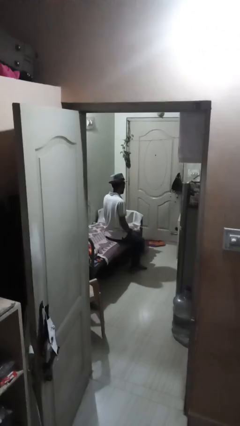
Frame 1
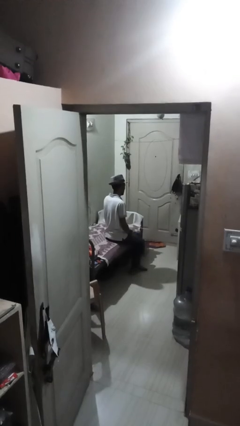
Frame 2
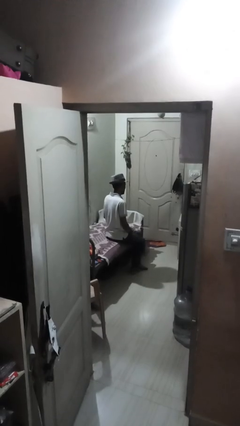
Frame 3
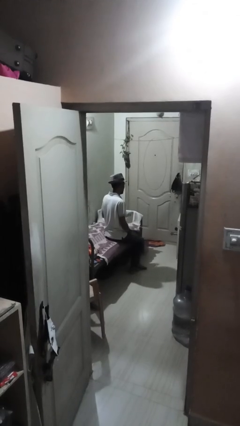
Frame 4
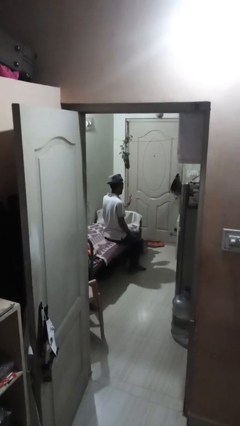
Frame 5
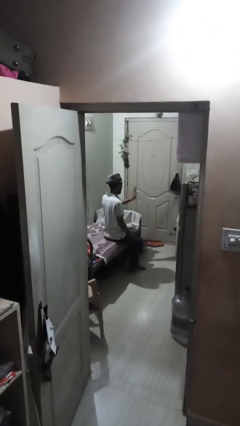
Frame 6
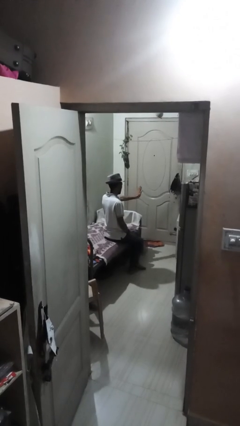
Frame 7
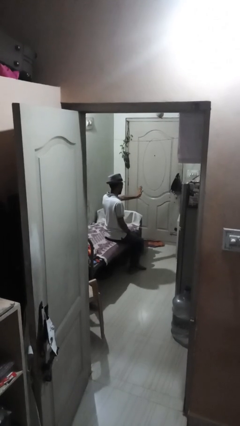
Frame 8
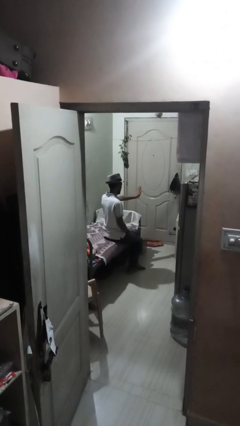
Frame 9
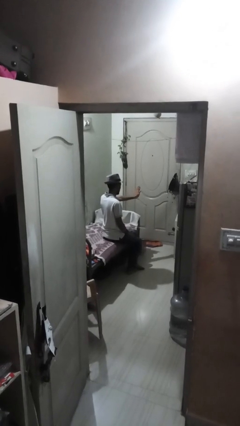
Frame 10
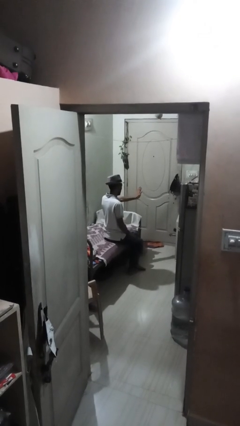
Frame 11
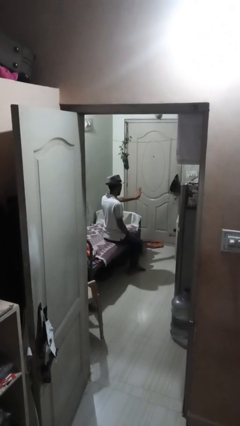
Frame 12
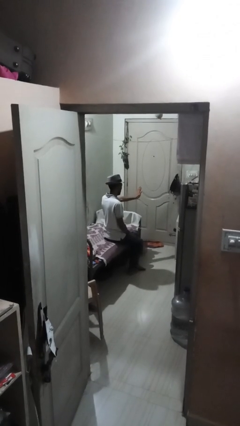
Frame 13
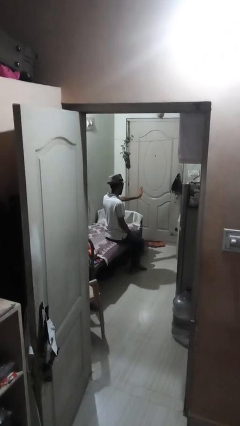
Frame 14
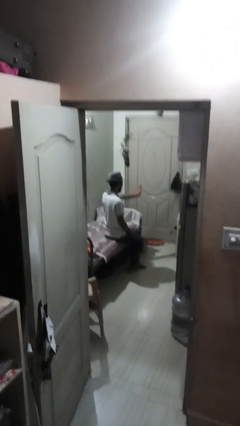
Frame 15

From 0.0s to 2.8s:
person gestures stop

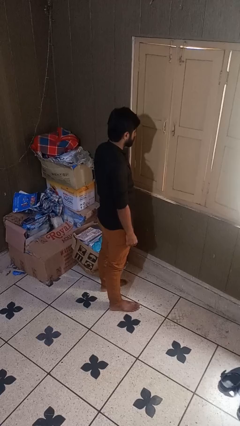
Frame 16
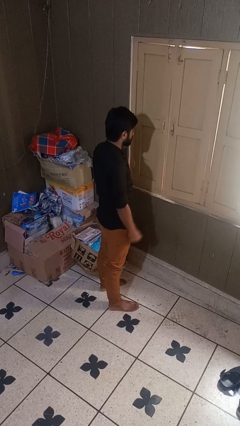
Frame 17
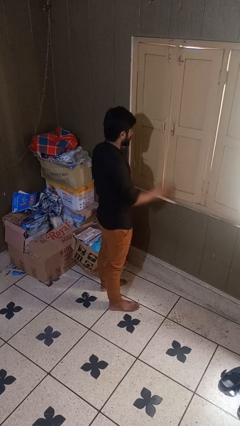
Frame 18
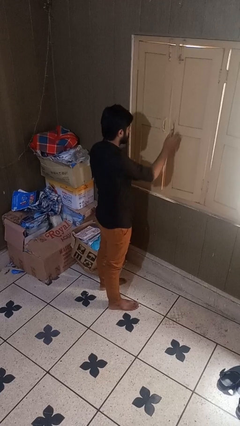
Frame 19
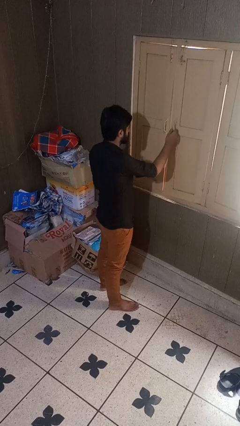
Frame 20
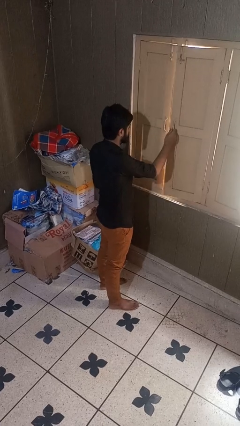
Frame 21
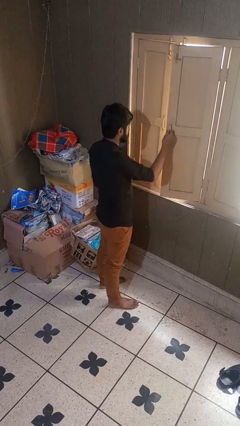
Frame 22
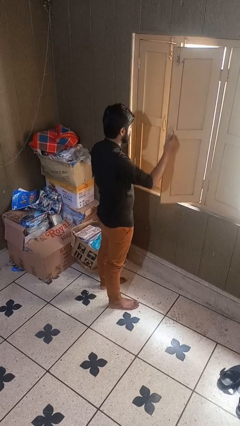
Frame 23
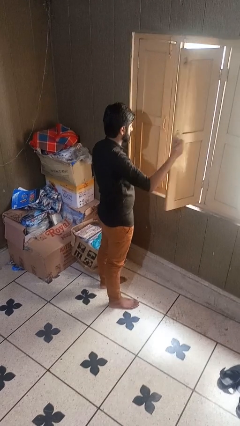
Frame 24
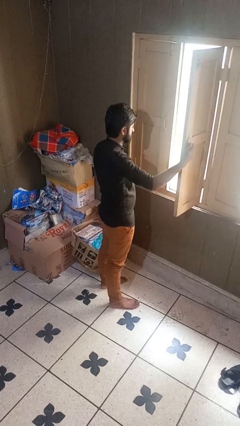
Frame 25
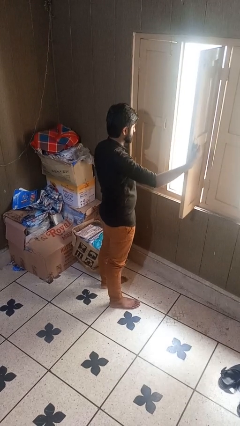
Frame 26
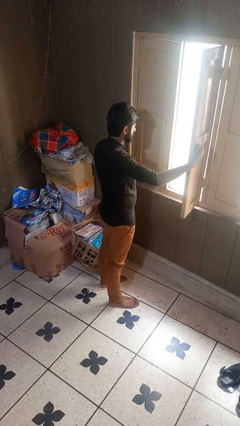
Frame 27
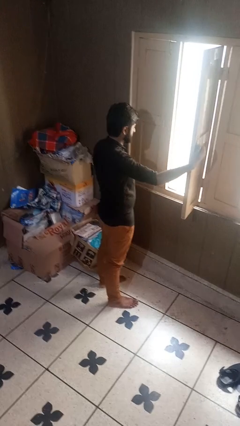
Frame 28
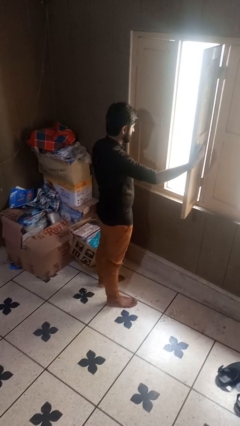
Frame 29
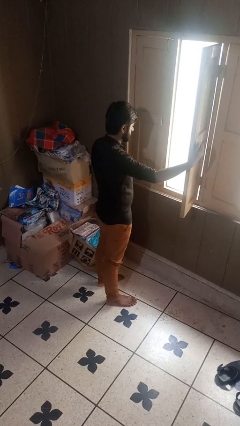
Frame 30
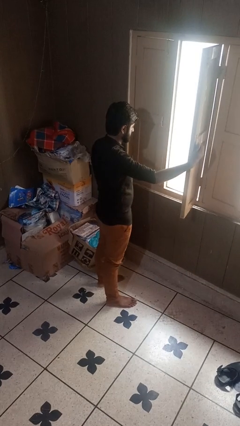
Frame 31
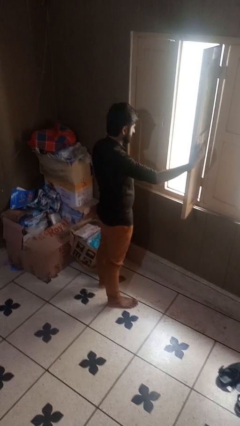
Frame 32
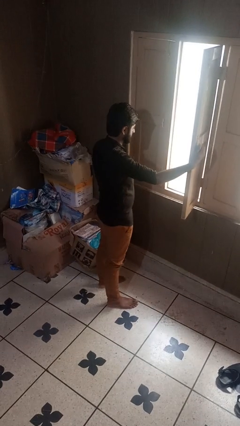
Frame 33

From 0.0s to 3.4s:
person opens home window

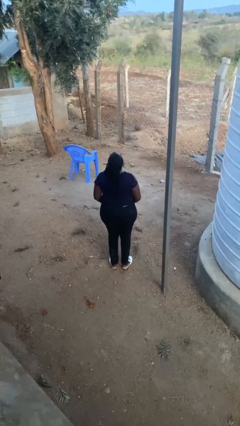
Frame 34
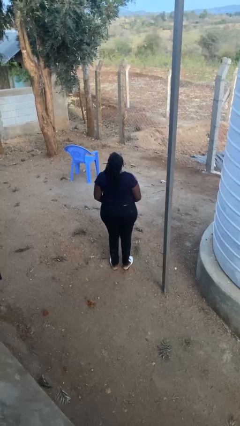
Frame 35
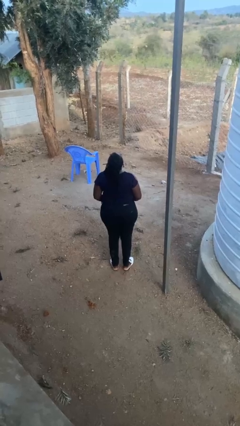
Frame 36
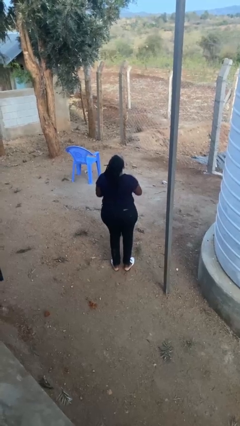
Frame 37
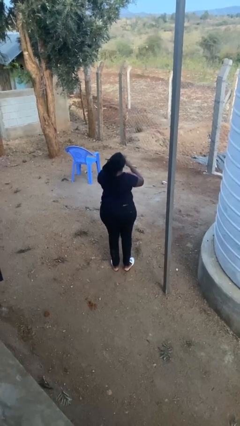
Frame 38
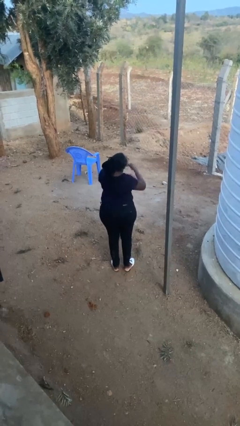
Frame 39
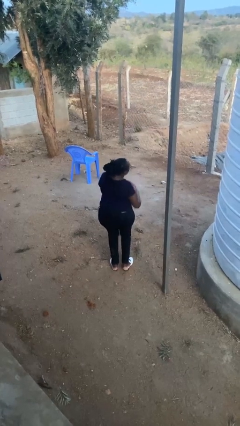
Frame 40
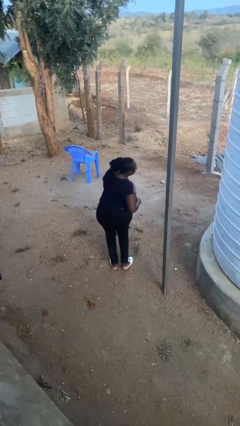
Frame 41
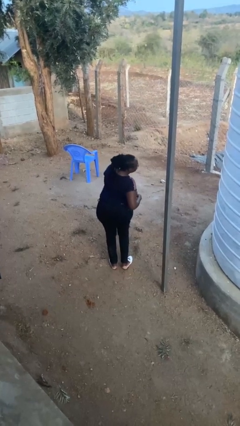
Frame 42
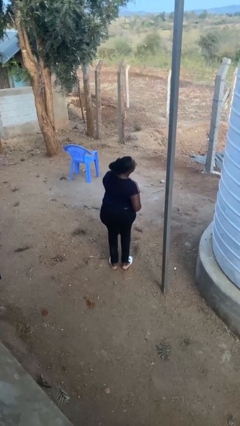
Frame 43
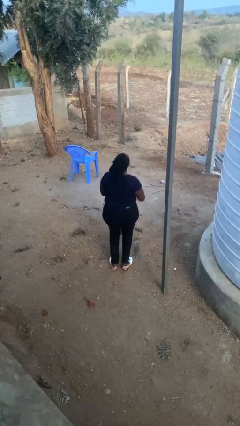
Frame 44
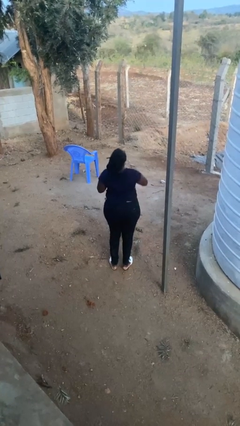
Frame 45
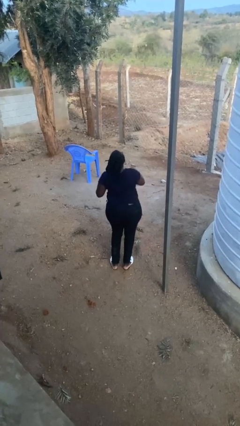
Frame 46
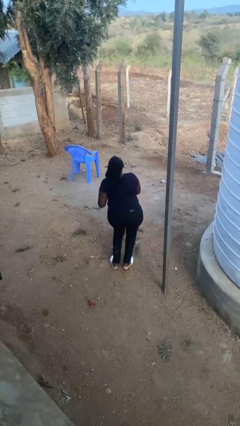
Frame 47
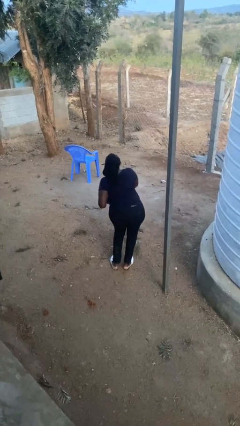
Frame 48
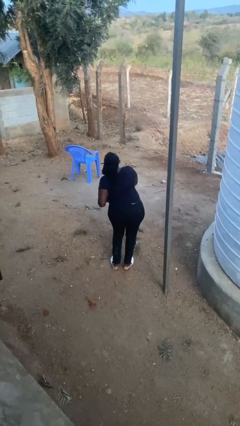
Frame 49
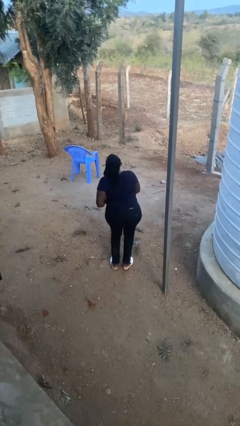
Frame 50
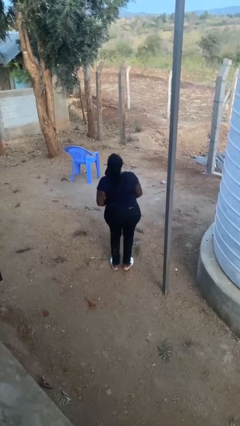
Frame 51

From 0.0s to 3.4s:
person dances in place

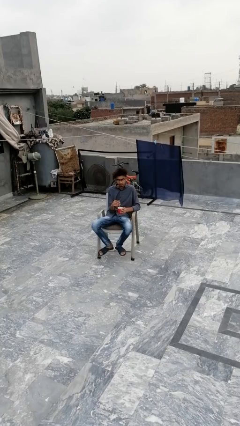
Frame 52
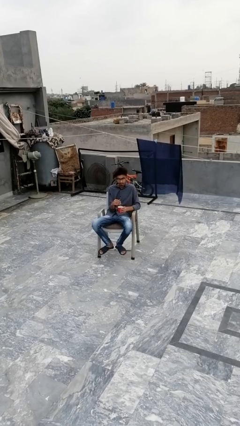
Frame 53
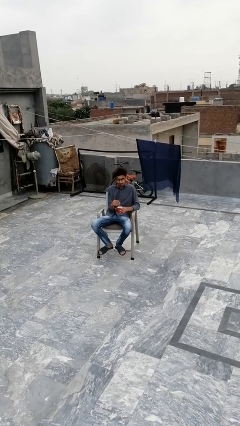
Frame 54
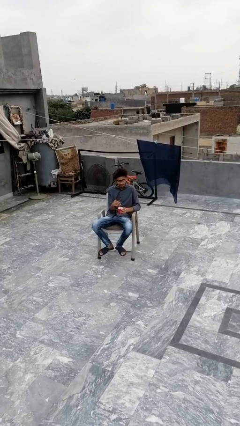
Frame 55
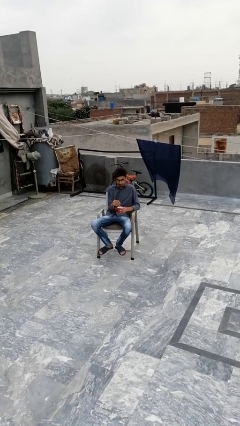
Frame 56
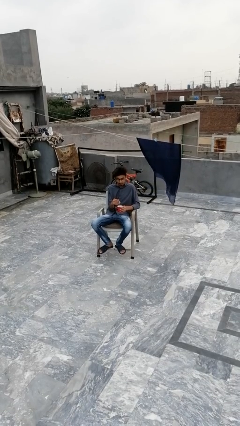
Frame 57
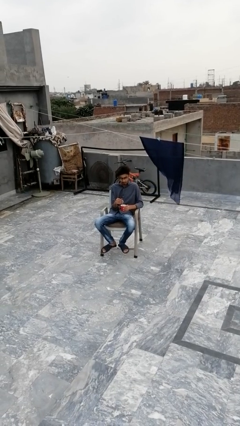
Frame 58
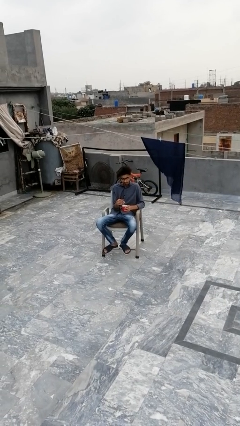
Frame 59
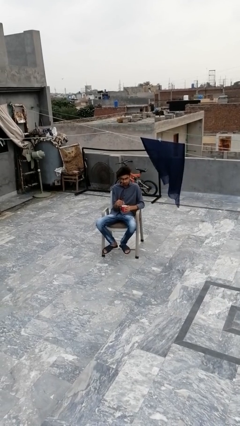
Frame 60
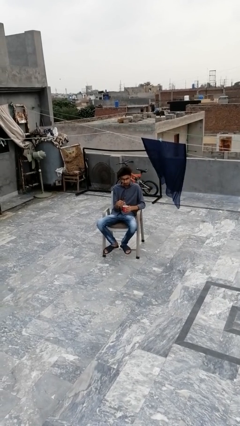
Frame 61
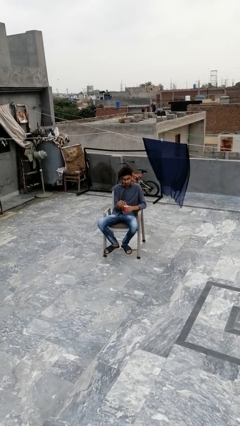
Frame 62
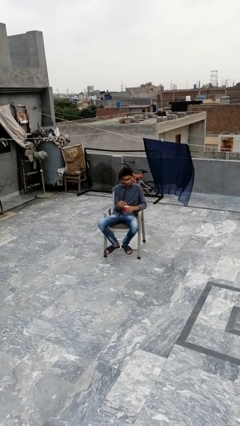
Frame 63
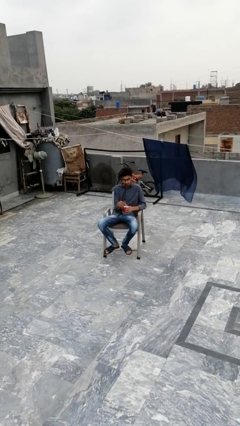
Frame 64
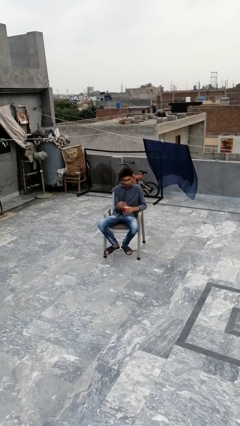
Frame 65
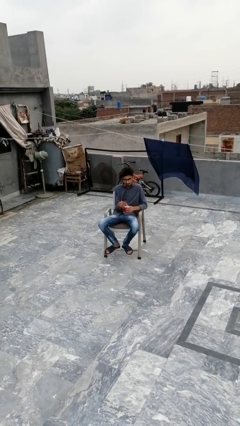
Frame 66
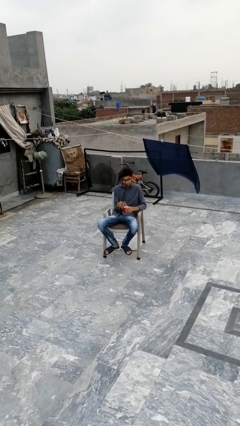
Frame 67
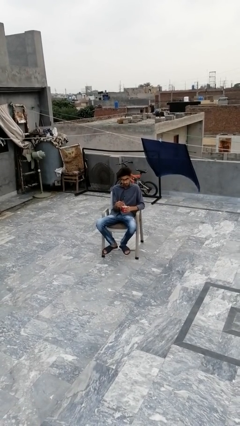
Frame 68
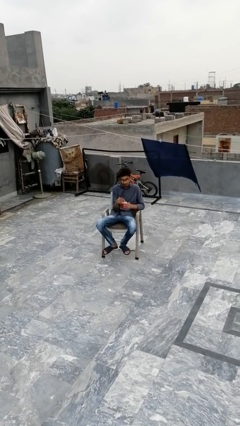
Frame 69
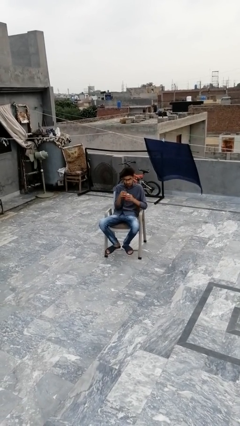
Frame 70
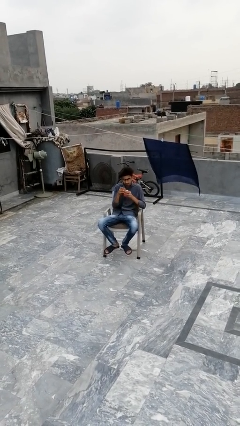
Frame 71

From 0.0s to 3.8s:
person stirs mug

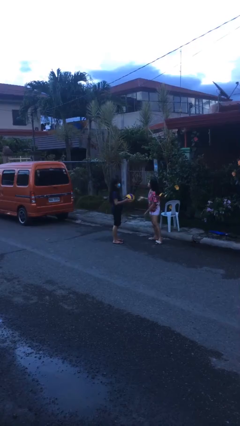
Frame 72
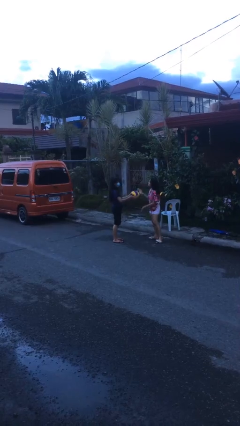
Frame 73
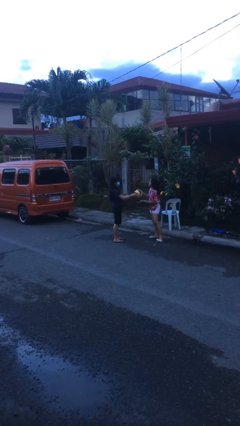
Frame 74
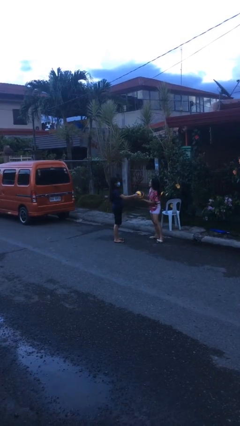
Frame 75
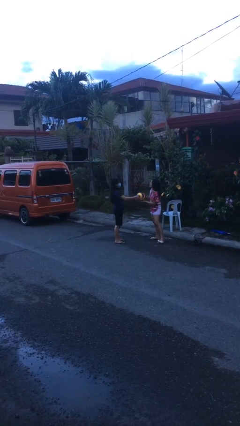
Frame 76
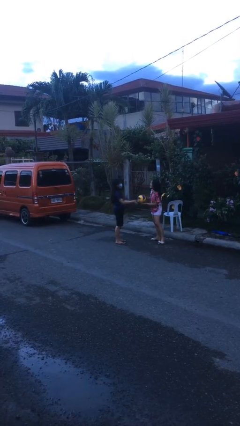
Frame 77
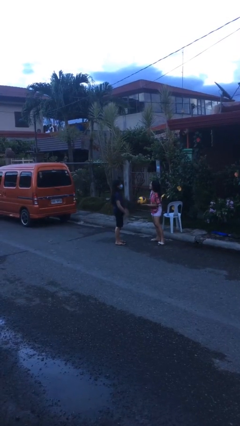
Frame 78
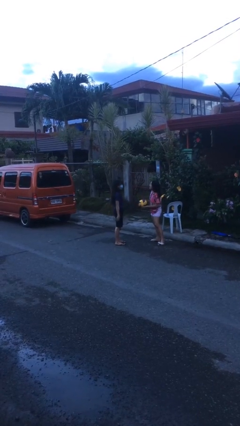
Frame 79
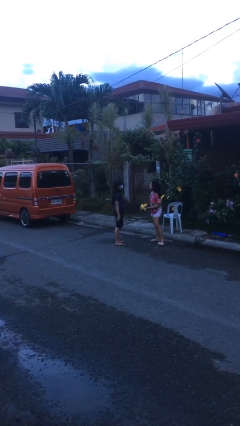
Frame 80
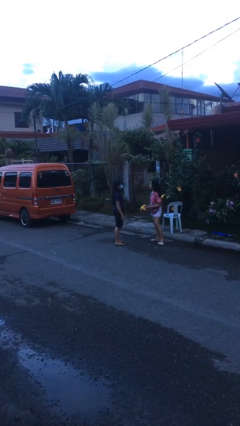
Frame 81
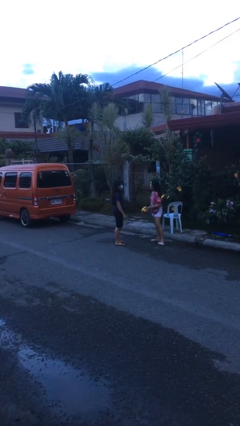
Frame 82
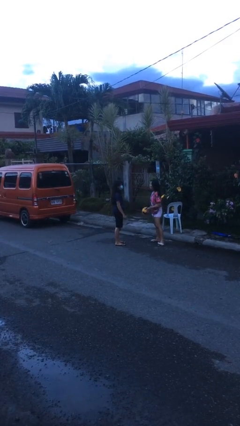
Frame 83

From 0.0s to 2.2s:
person transfers object to person

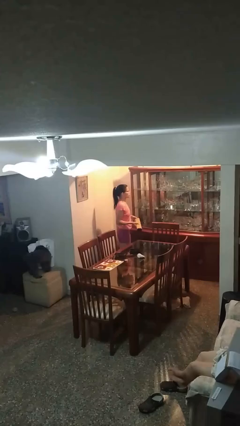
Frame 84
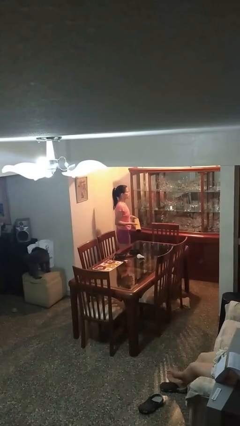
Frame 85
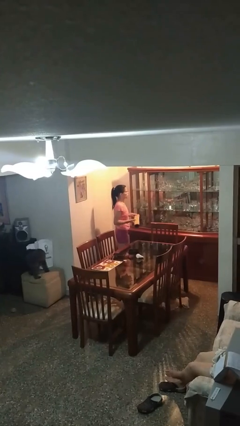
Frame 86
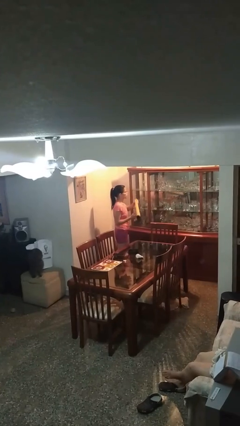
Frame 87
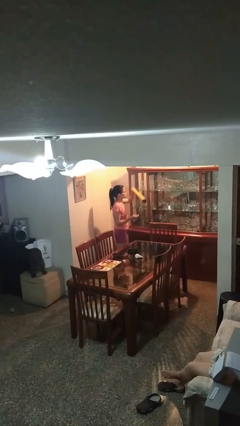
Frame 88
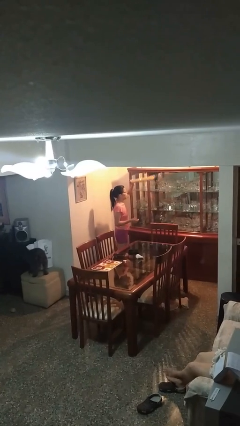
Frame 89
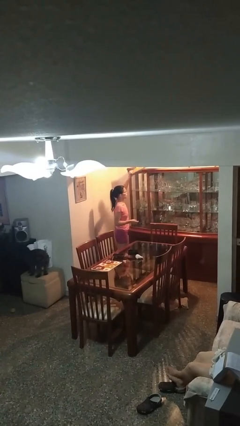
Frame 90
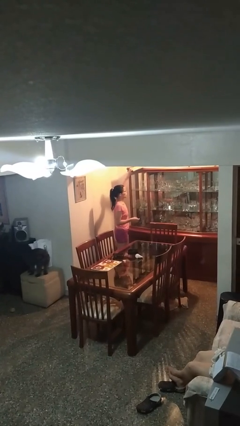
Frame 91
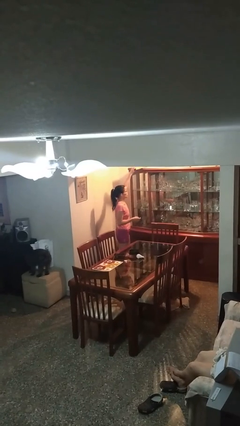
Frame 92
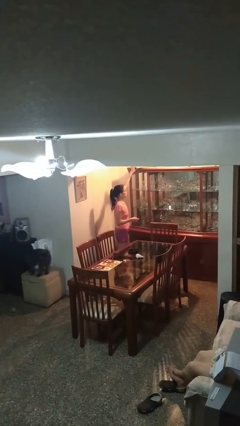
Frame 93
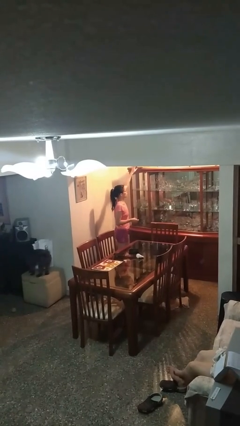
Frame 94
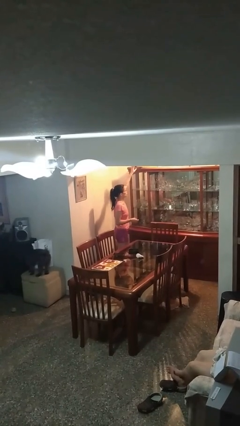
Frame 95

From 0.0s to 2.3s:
person puts down object on shelf
